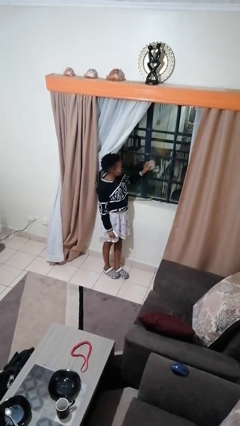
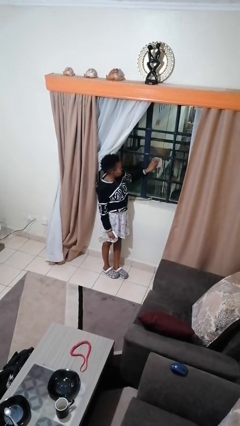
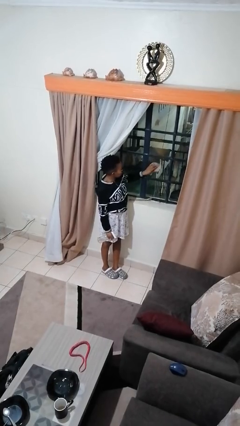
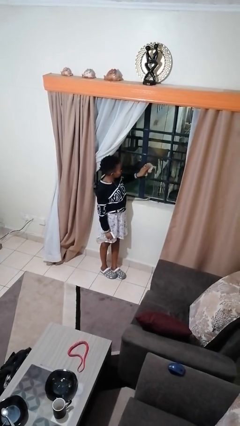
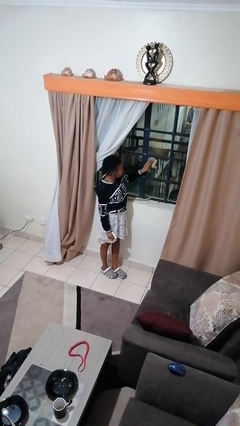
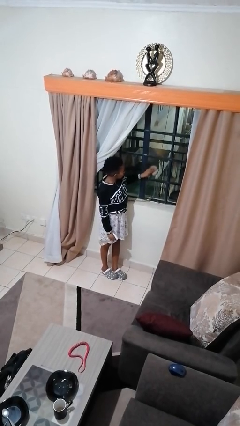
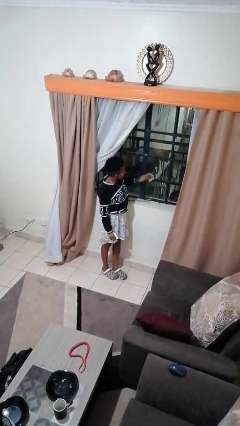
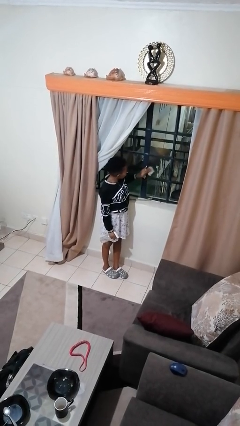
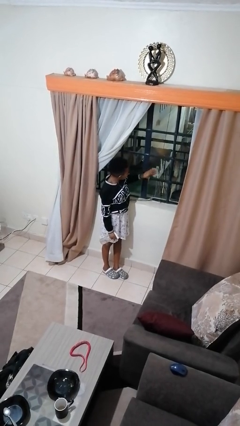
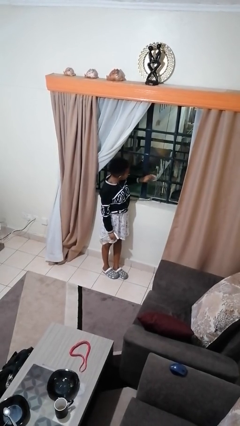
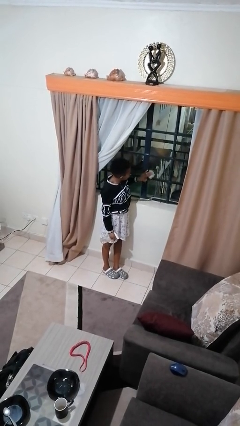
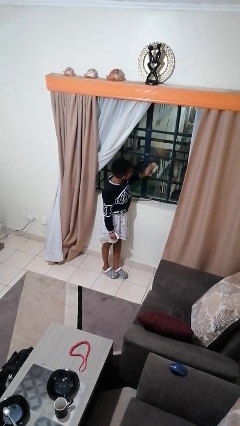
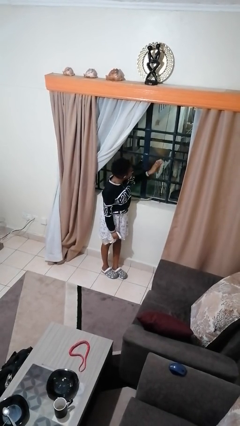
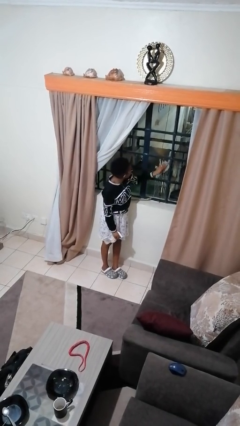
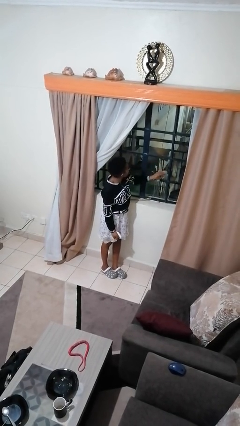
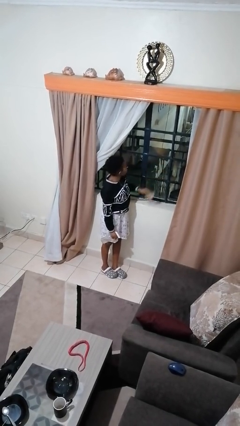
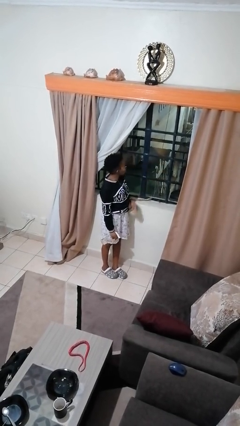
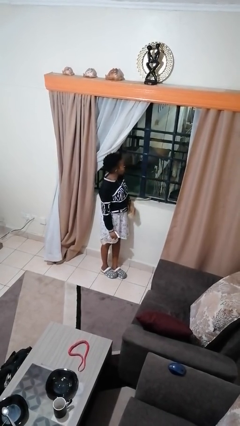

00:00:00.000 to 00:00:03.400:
person washes window

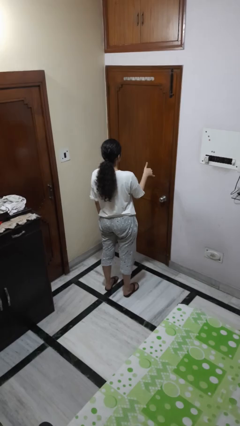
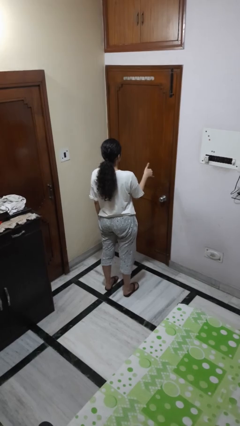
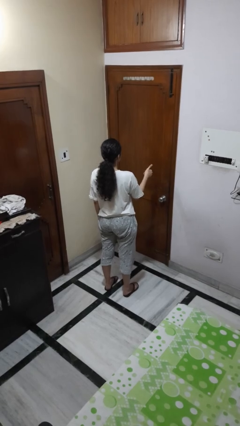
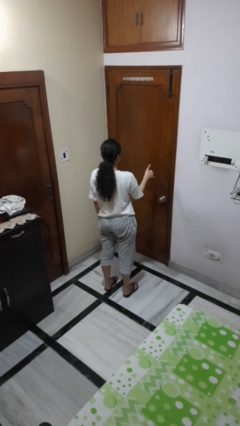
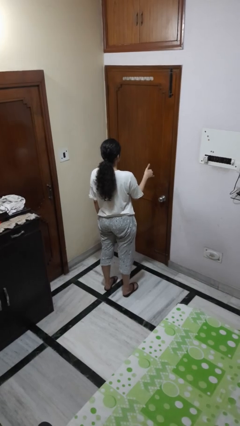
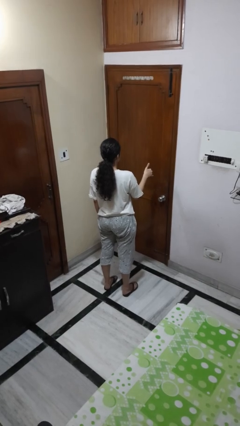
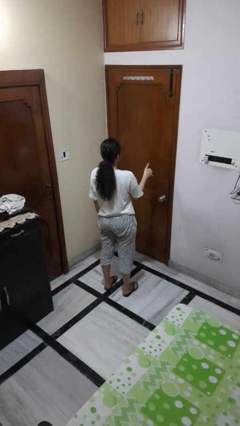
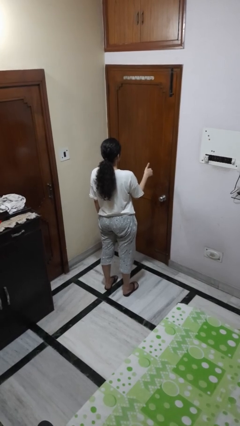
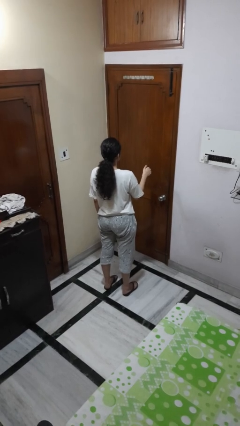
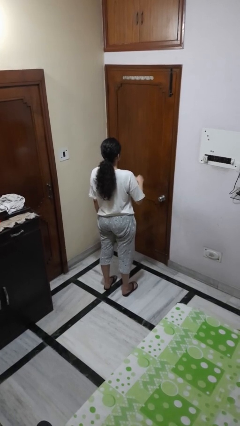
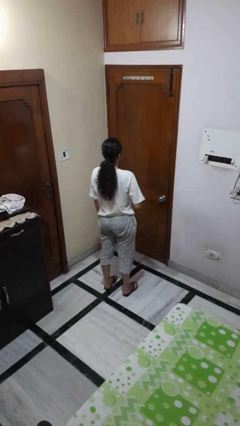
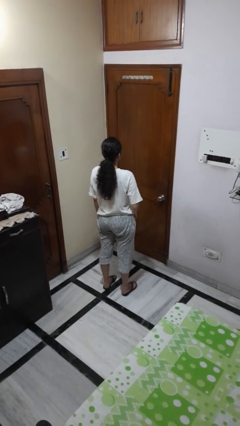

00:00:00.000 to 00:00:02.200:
person gestures hang loose

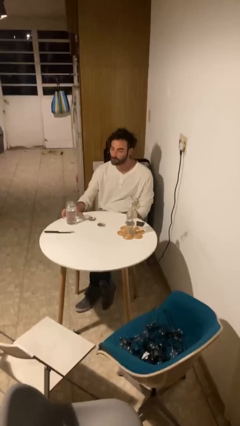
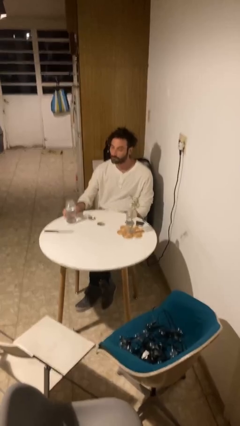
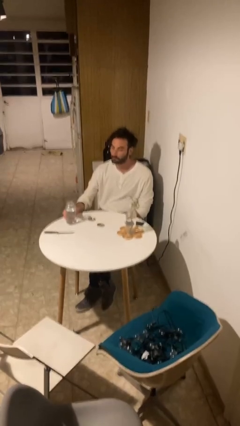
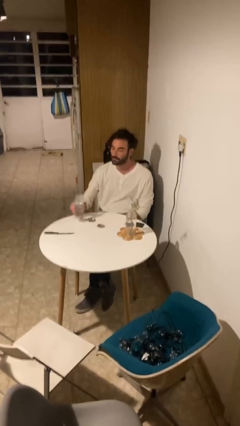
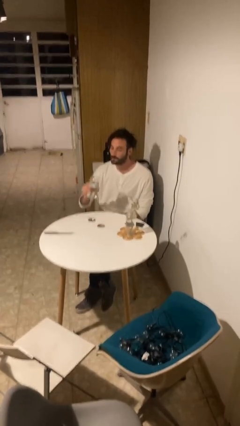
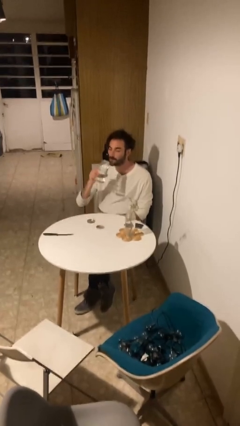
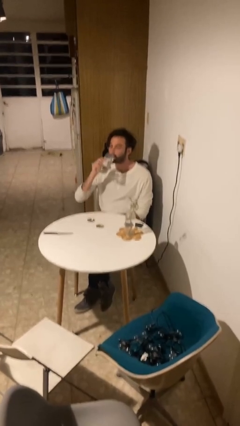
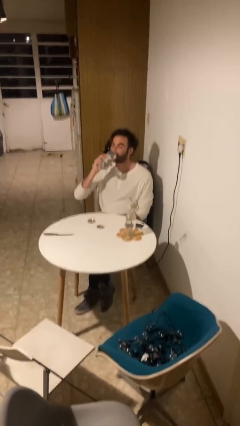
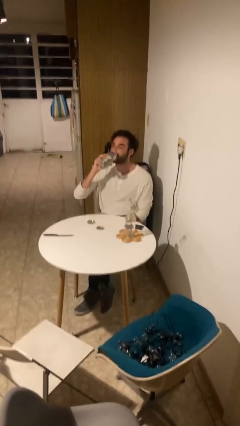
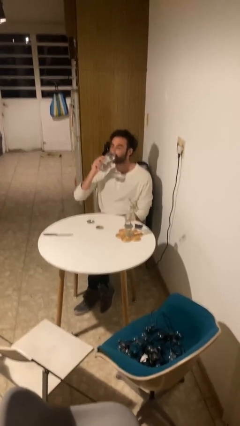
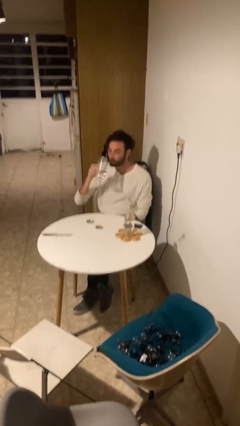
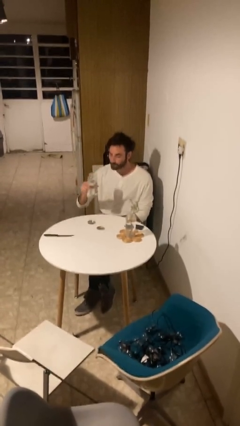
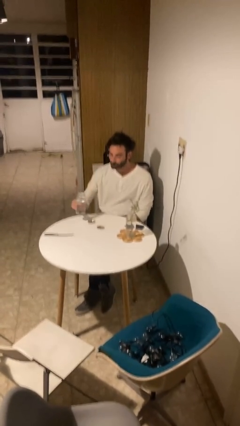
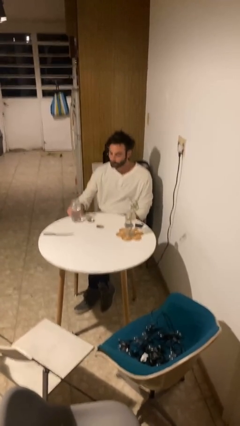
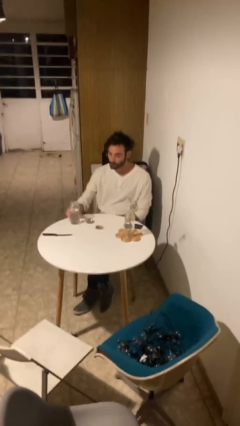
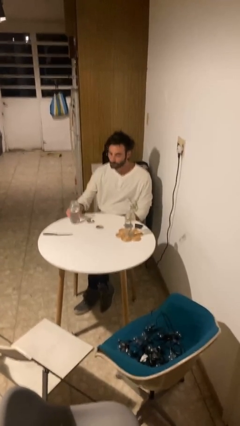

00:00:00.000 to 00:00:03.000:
person drinks from cup

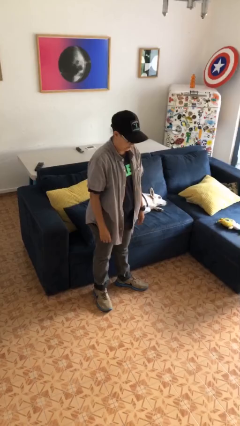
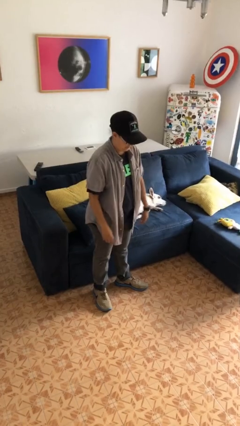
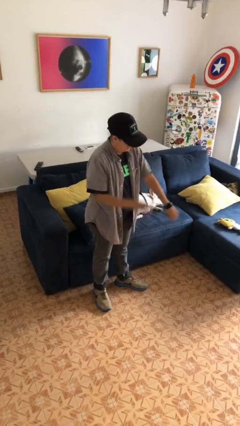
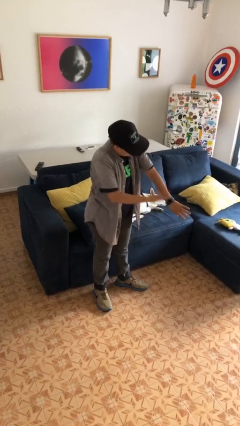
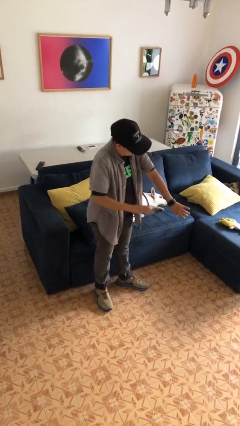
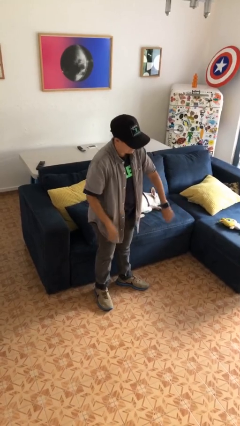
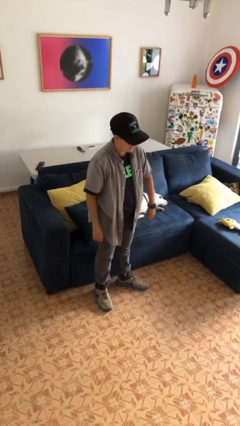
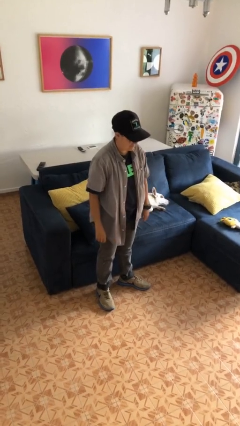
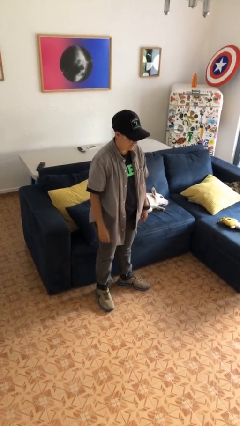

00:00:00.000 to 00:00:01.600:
person swats bug

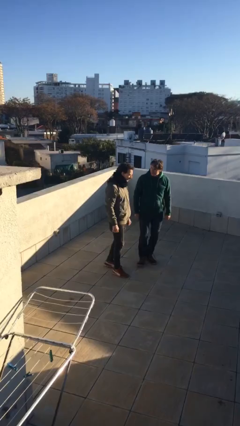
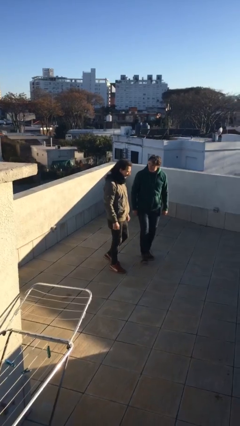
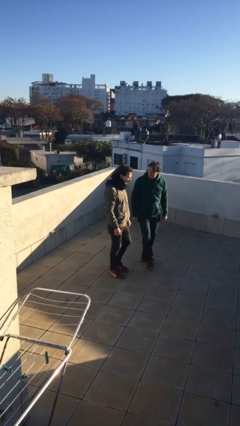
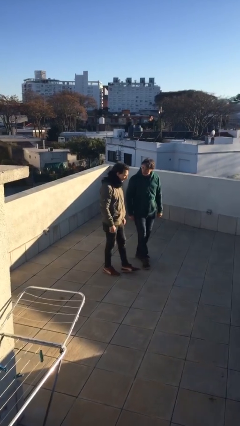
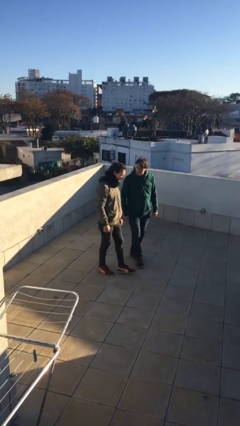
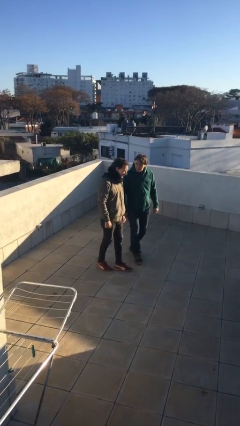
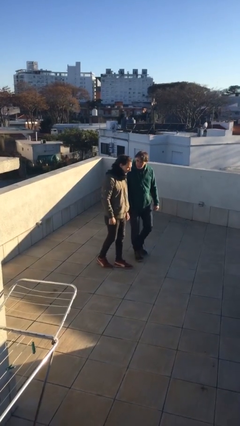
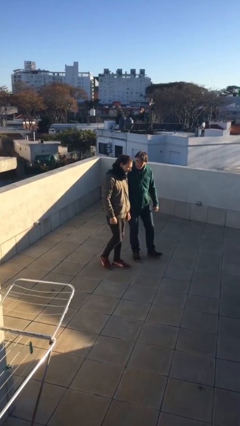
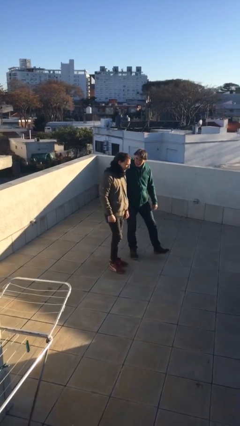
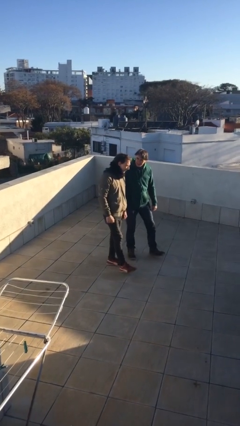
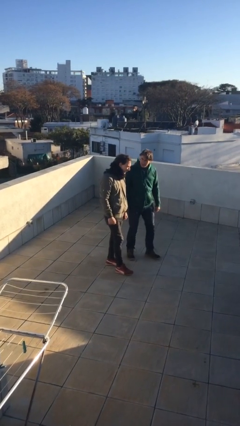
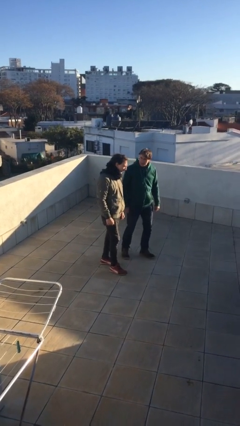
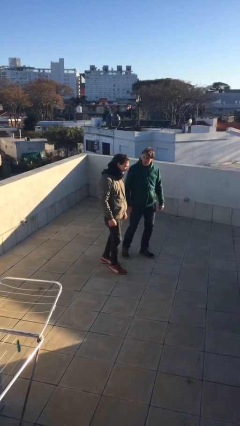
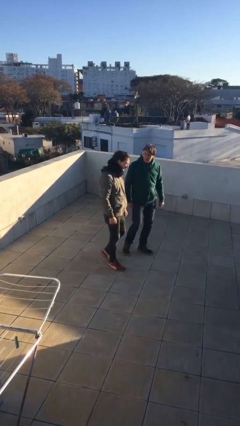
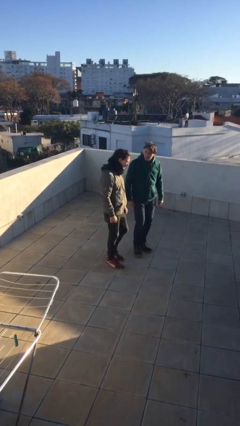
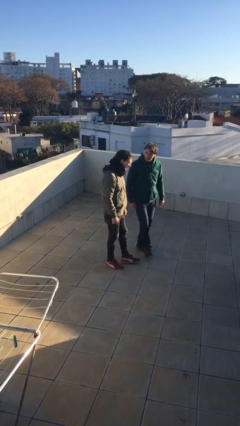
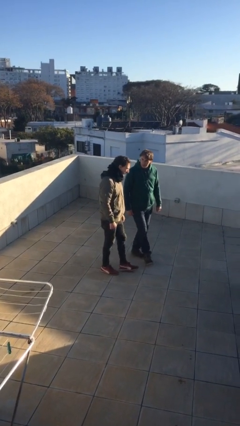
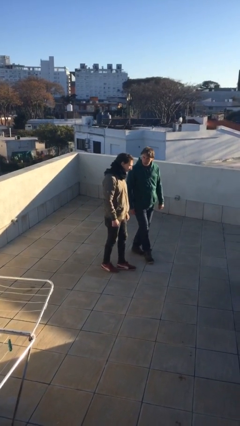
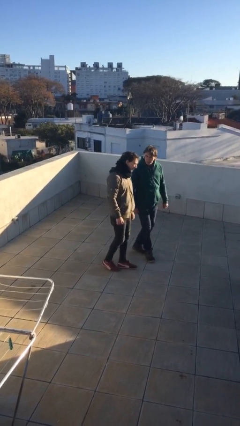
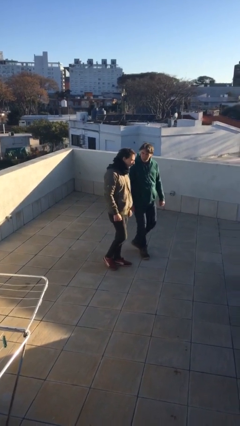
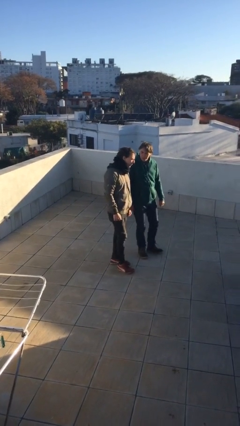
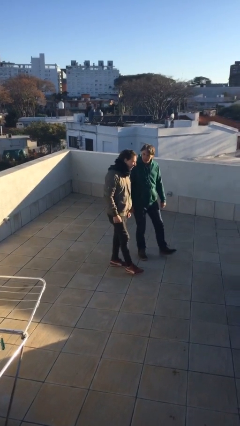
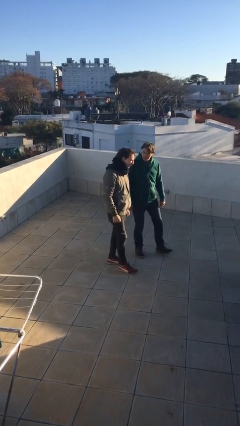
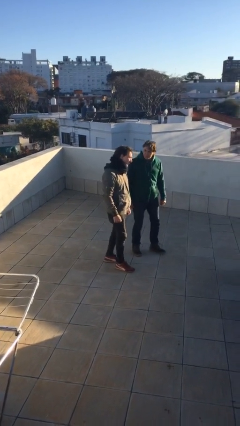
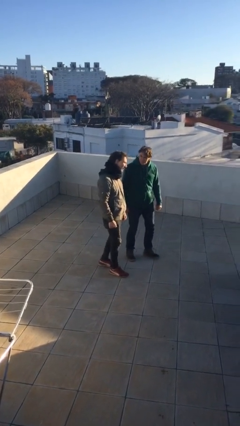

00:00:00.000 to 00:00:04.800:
person talks to person

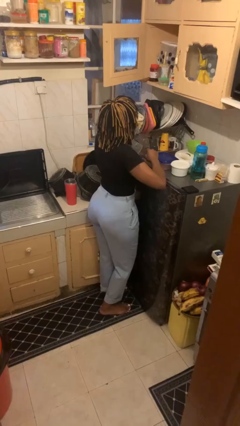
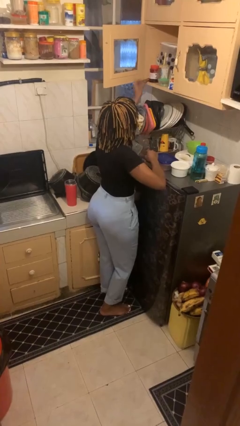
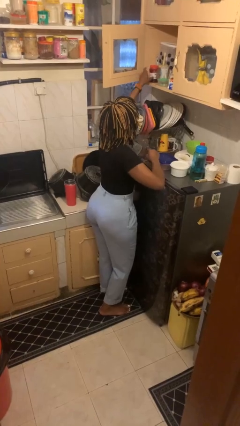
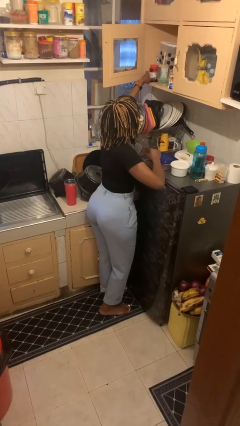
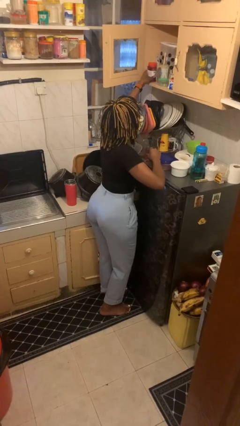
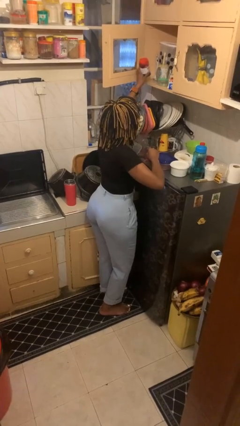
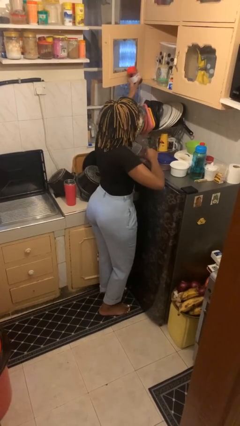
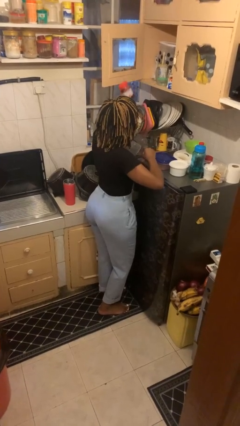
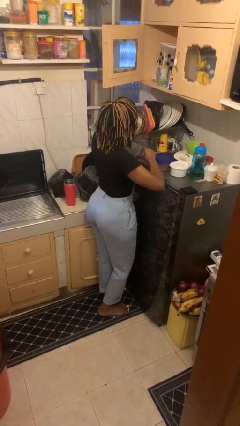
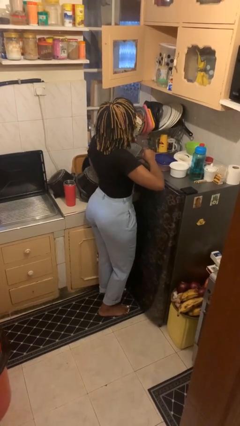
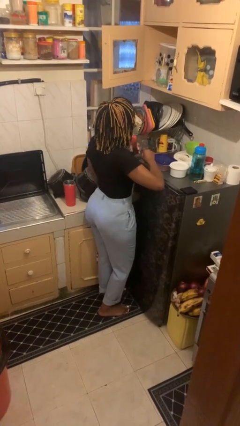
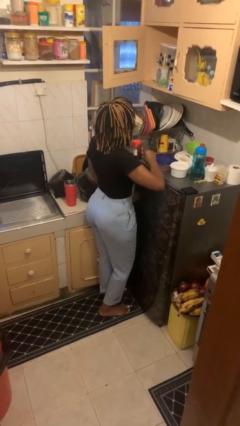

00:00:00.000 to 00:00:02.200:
person takes object from cabinet
